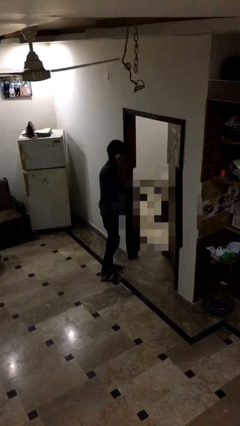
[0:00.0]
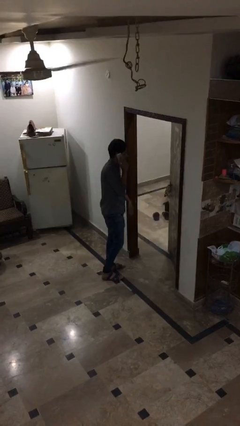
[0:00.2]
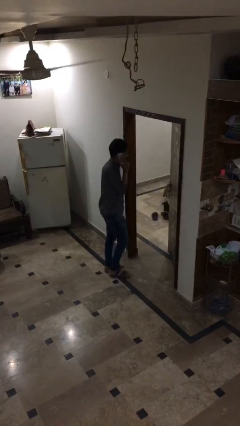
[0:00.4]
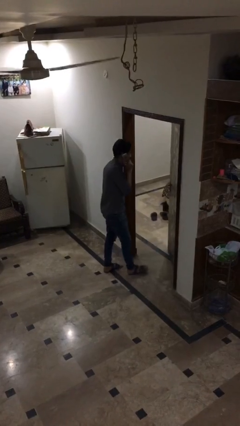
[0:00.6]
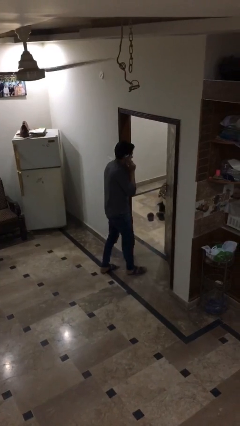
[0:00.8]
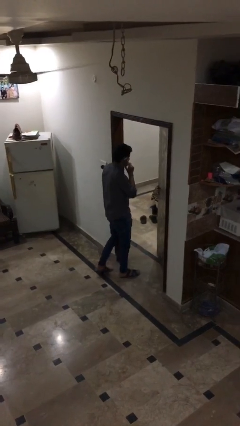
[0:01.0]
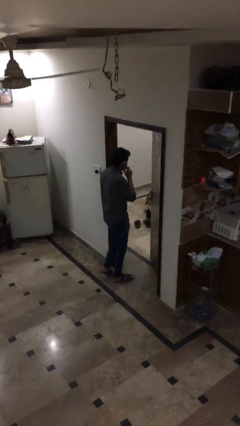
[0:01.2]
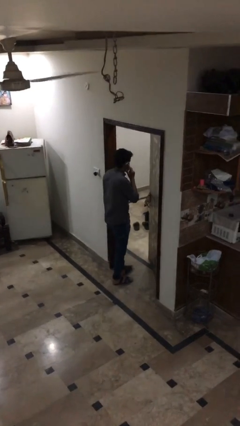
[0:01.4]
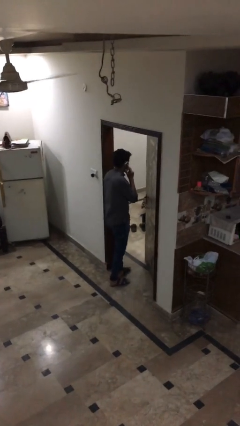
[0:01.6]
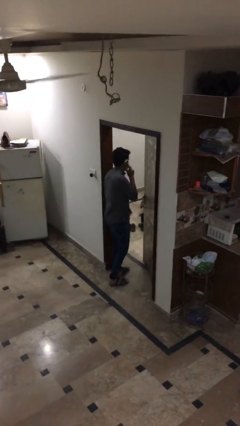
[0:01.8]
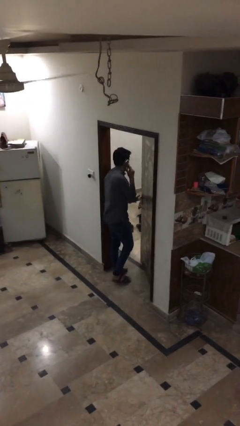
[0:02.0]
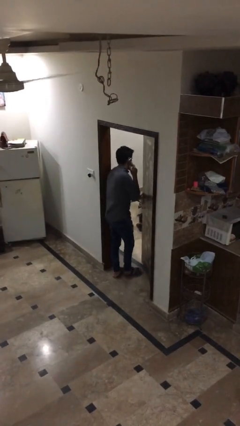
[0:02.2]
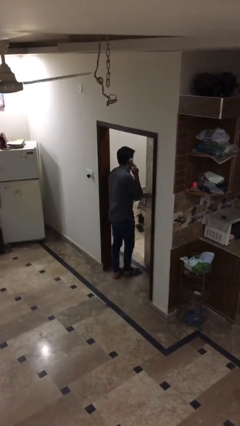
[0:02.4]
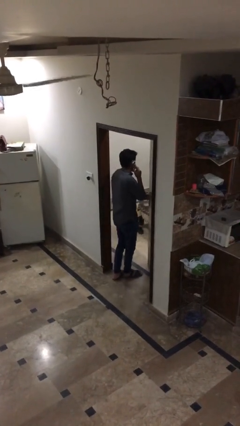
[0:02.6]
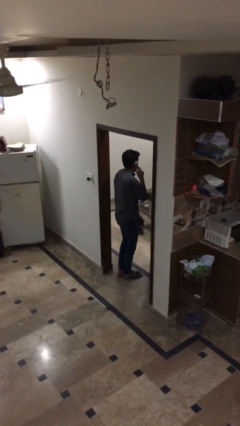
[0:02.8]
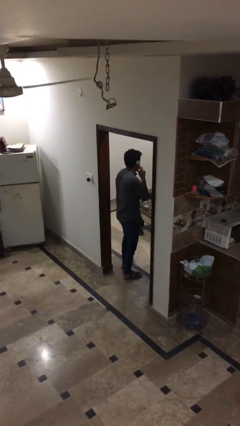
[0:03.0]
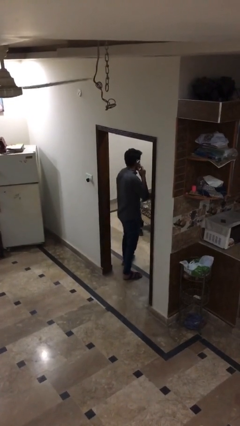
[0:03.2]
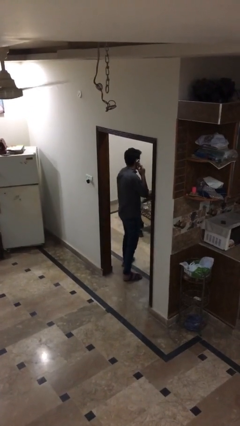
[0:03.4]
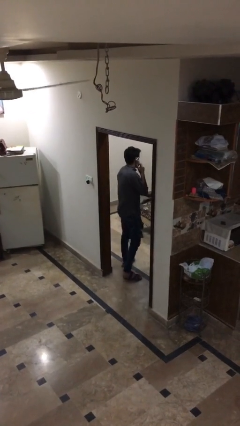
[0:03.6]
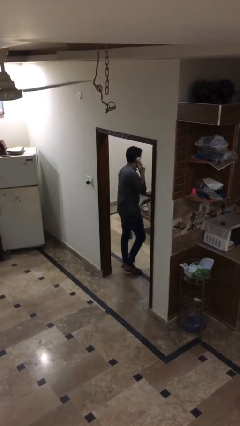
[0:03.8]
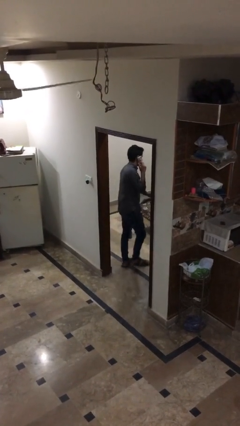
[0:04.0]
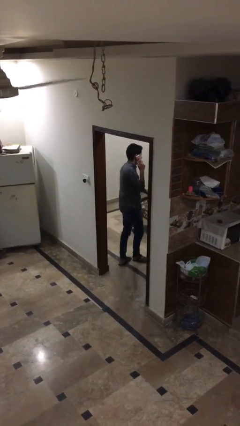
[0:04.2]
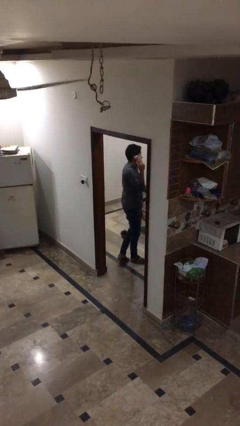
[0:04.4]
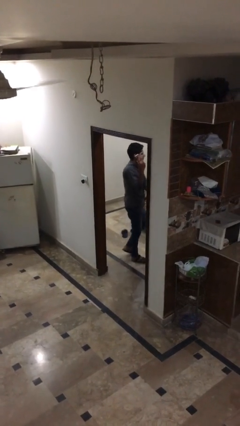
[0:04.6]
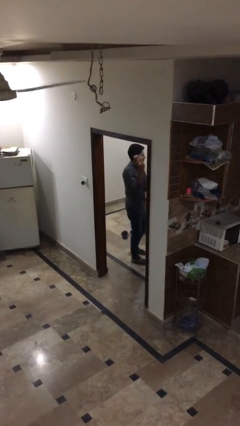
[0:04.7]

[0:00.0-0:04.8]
person exits scene through structure

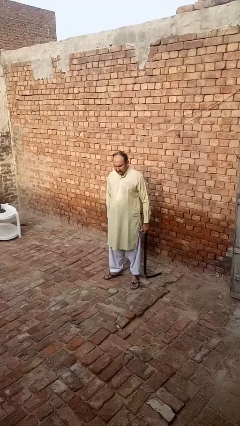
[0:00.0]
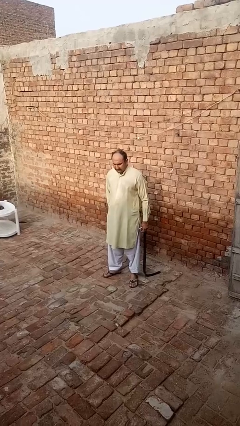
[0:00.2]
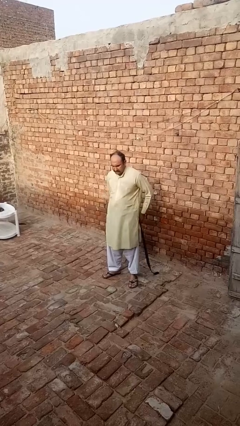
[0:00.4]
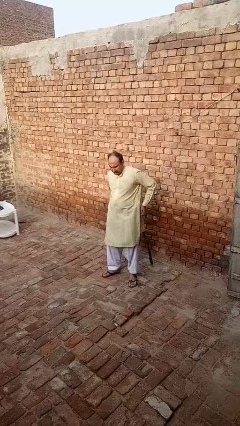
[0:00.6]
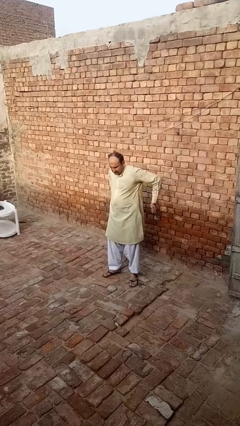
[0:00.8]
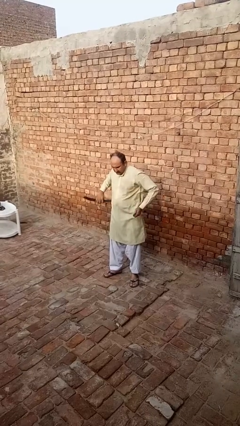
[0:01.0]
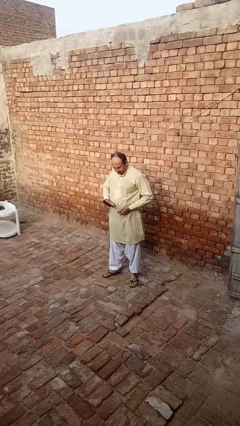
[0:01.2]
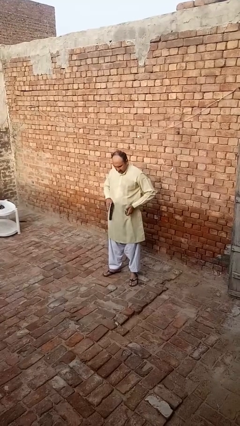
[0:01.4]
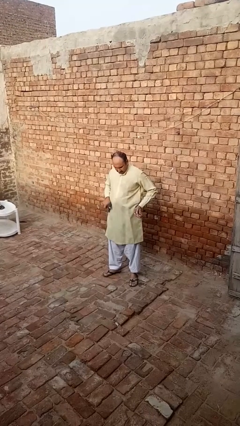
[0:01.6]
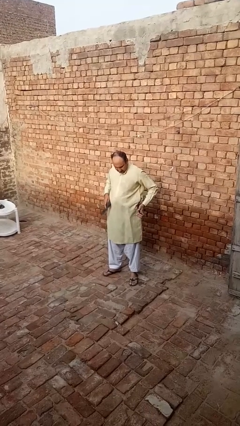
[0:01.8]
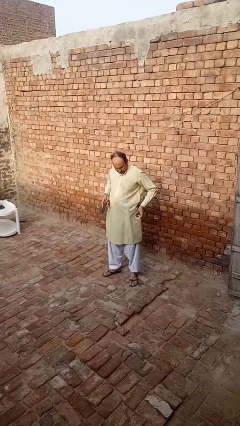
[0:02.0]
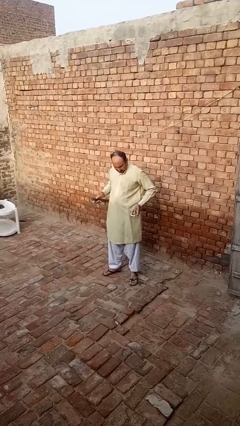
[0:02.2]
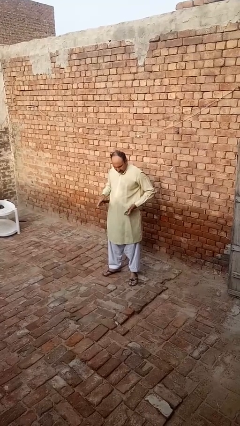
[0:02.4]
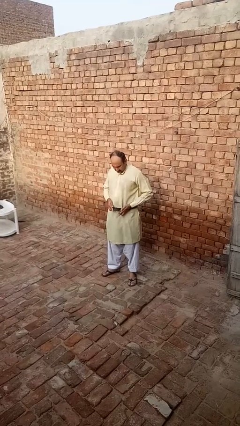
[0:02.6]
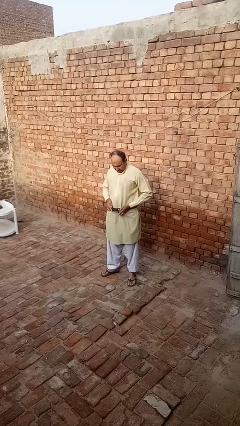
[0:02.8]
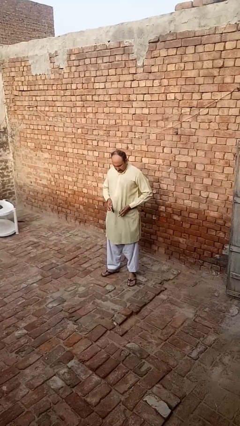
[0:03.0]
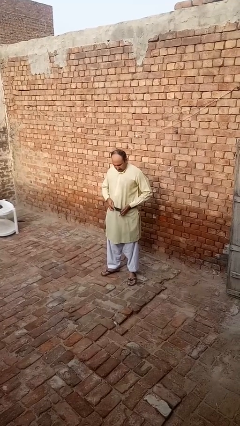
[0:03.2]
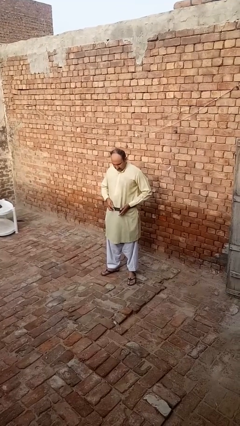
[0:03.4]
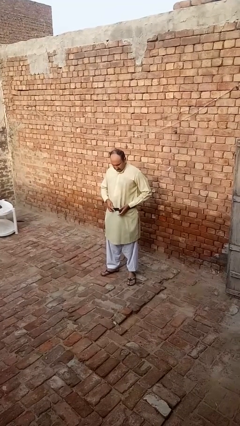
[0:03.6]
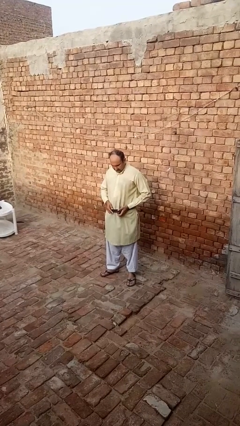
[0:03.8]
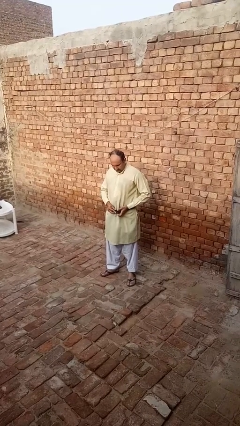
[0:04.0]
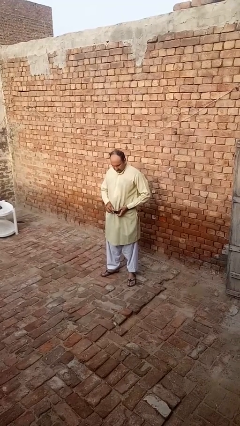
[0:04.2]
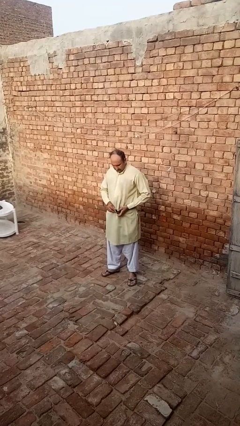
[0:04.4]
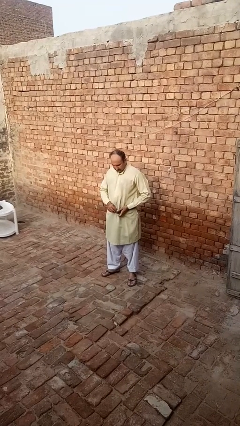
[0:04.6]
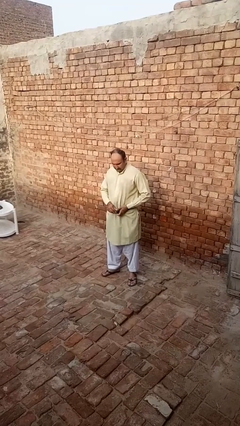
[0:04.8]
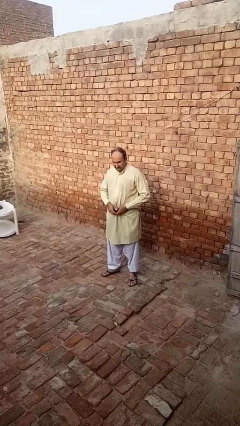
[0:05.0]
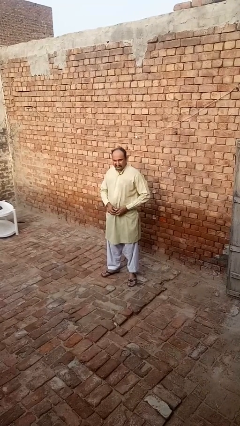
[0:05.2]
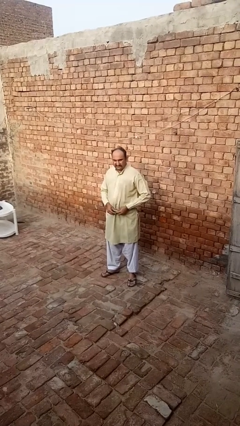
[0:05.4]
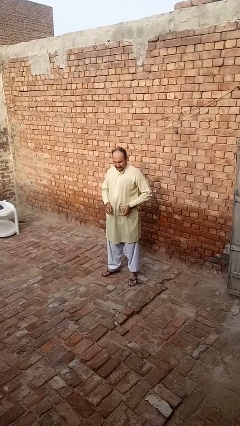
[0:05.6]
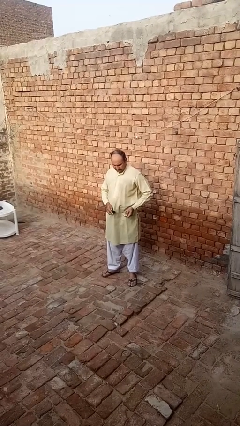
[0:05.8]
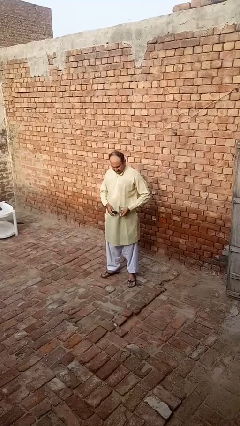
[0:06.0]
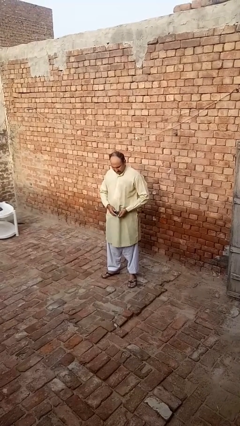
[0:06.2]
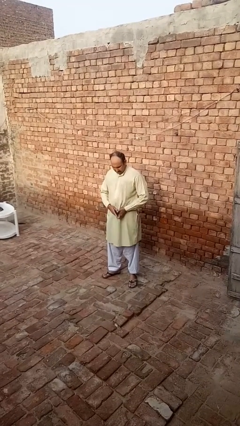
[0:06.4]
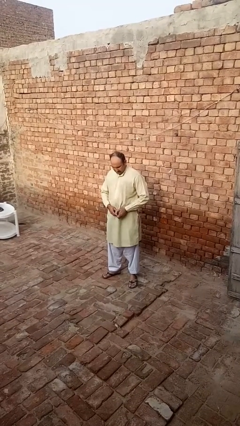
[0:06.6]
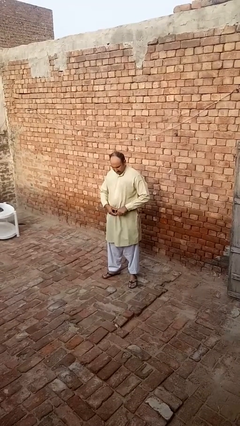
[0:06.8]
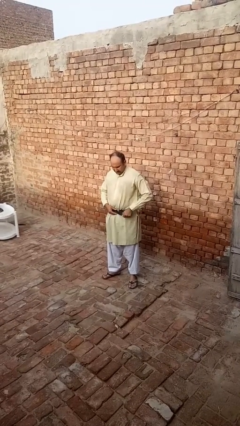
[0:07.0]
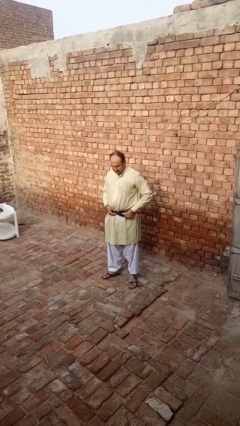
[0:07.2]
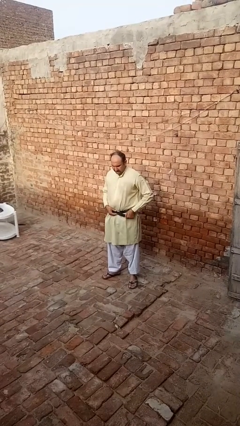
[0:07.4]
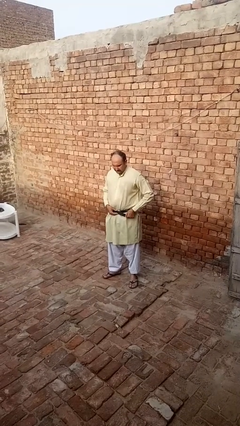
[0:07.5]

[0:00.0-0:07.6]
person puts on belt

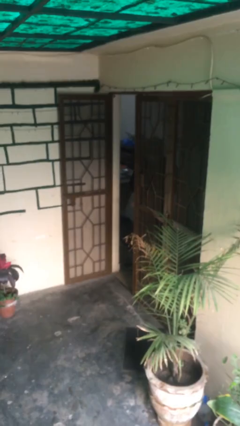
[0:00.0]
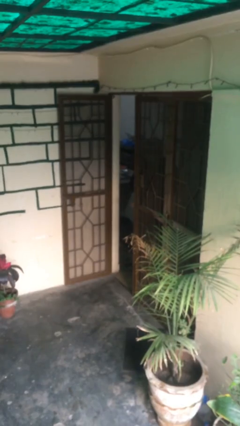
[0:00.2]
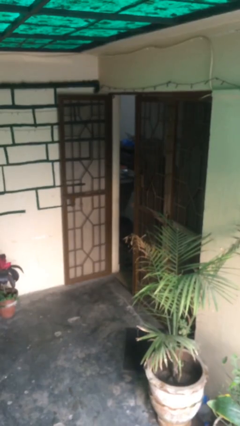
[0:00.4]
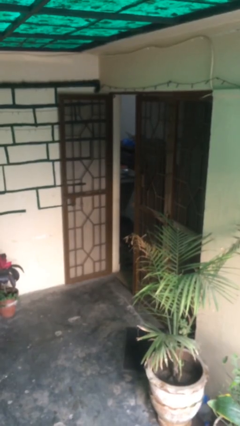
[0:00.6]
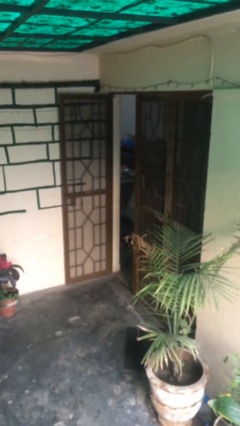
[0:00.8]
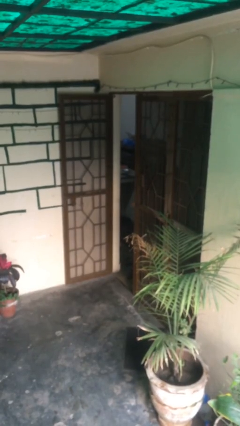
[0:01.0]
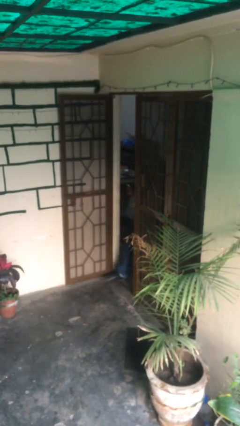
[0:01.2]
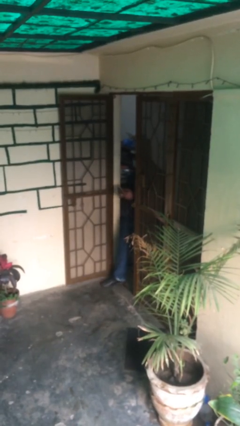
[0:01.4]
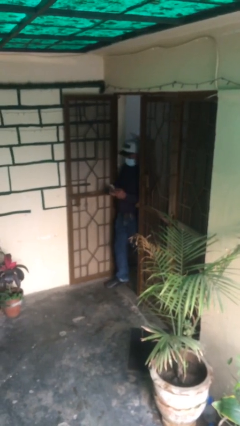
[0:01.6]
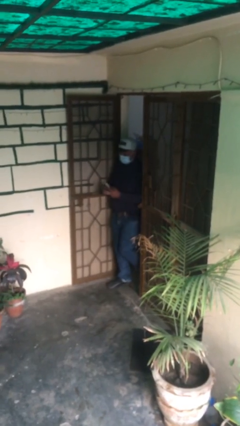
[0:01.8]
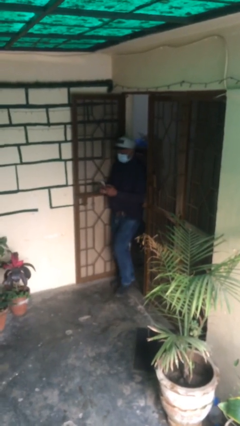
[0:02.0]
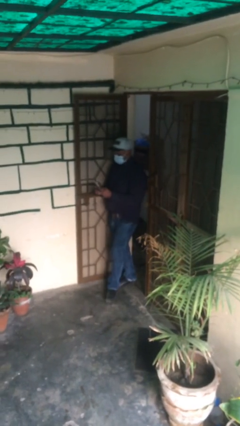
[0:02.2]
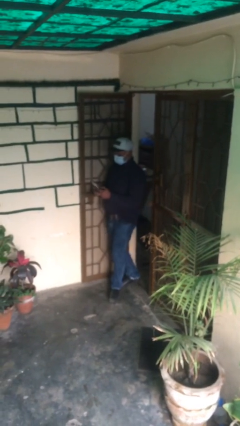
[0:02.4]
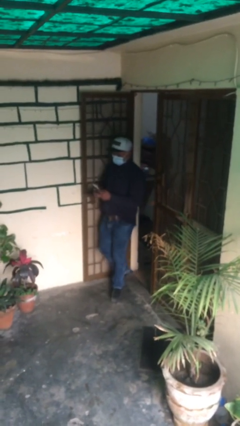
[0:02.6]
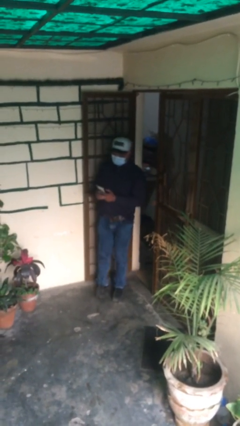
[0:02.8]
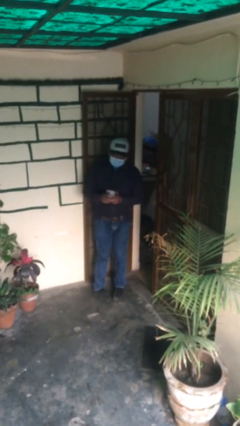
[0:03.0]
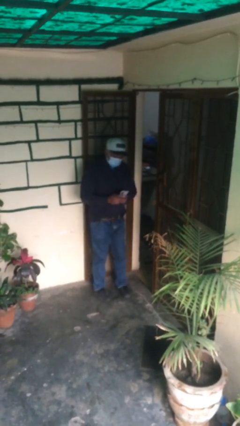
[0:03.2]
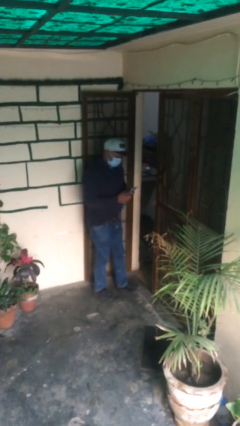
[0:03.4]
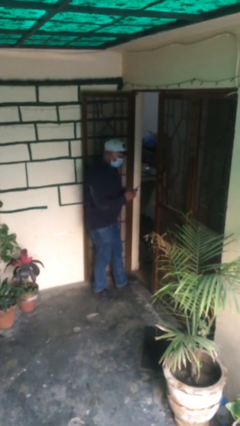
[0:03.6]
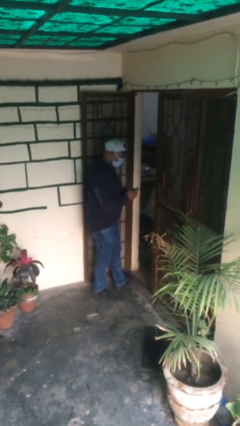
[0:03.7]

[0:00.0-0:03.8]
person enters scene through structure

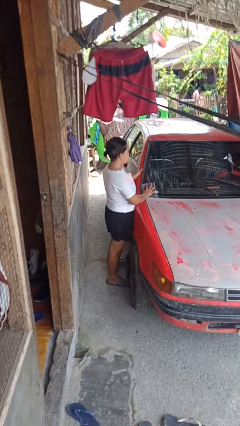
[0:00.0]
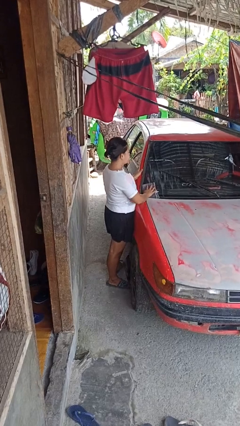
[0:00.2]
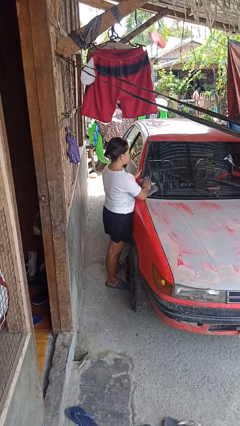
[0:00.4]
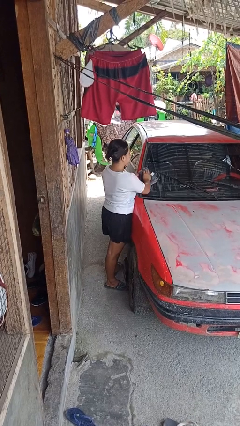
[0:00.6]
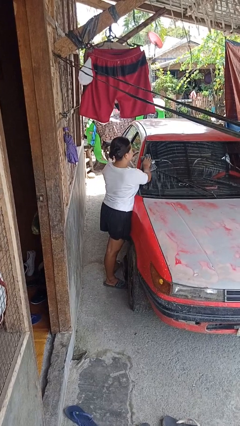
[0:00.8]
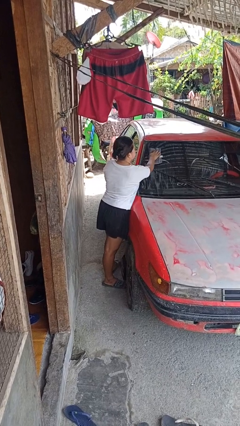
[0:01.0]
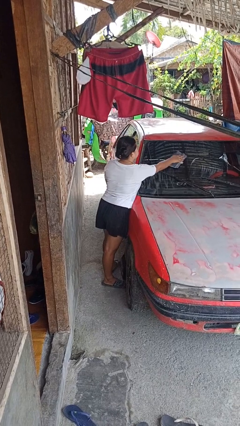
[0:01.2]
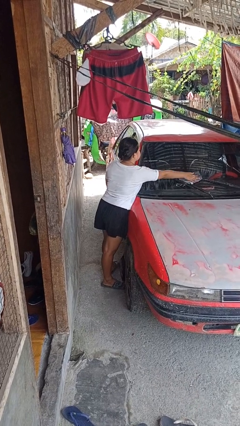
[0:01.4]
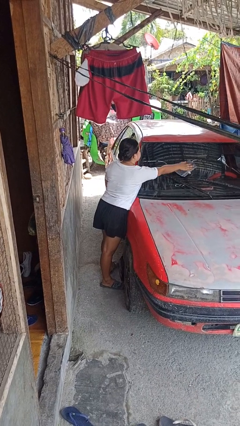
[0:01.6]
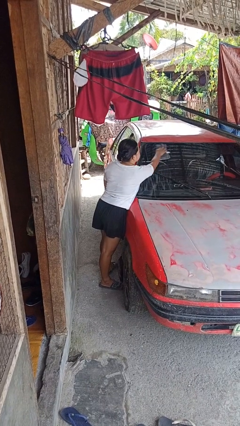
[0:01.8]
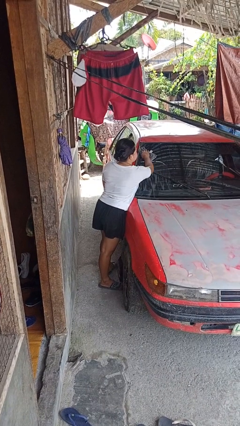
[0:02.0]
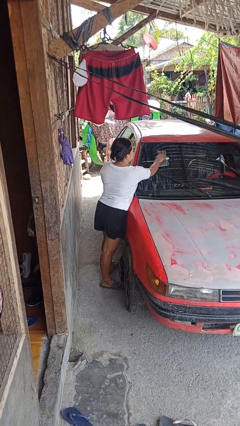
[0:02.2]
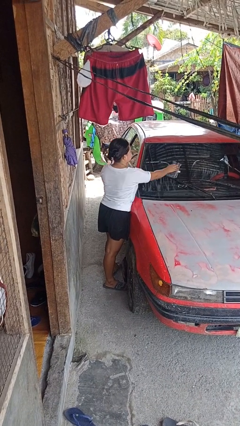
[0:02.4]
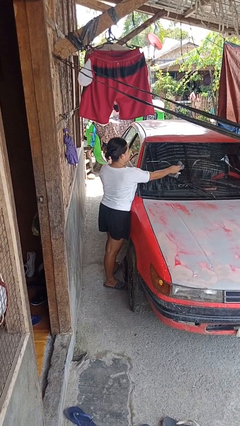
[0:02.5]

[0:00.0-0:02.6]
person polishes car with rag
